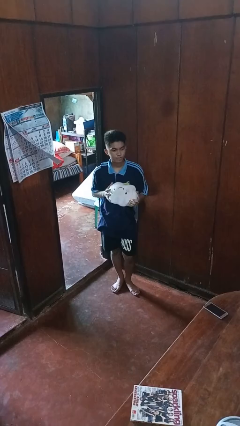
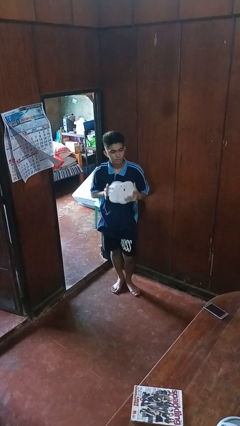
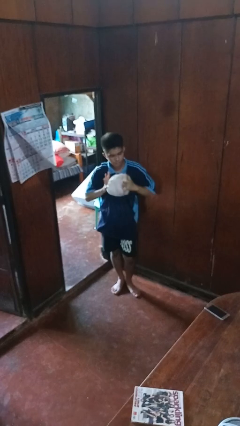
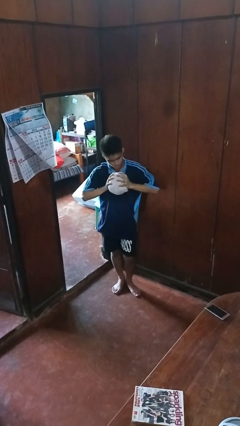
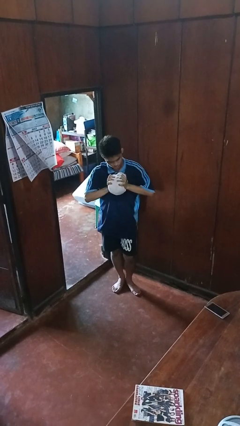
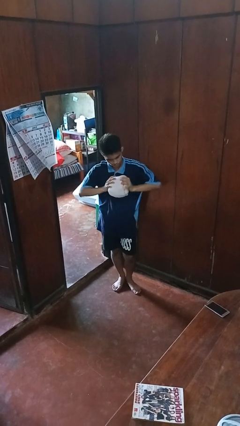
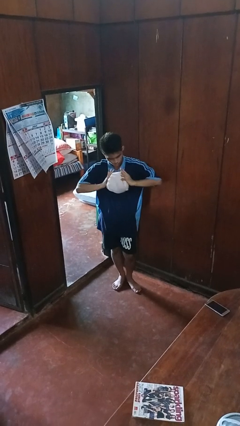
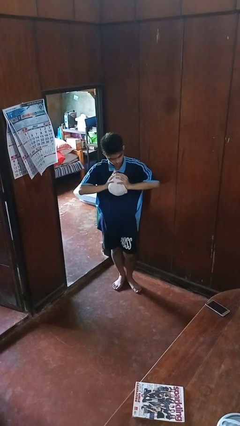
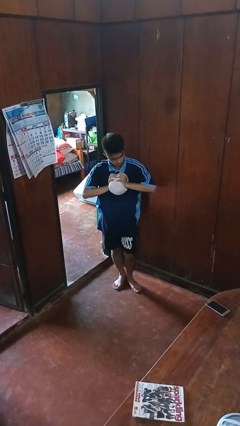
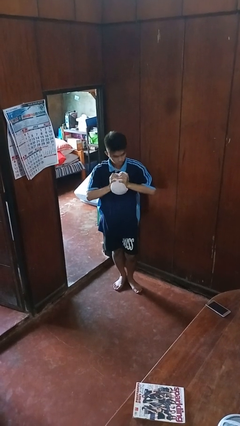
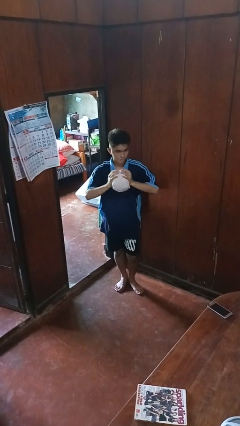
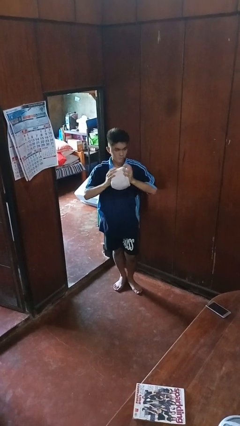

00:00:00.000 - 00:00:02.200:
person squeezes object

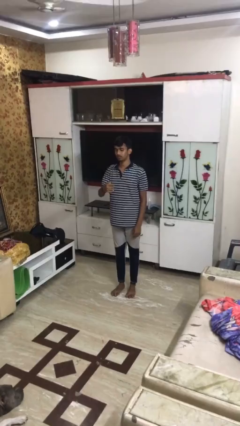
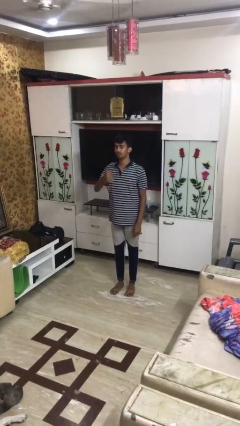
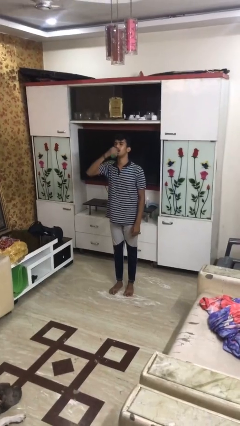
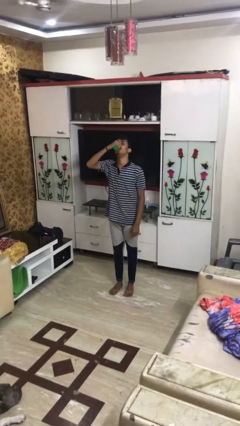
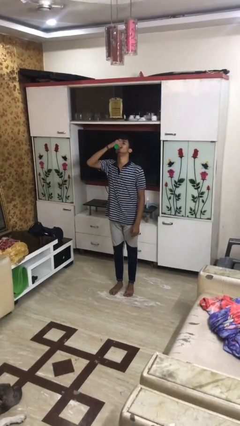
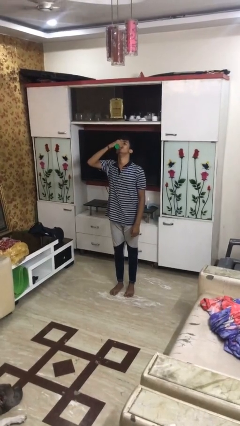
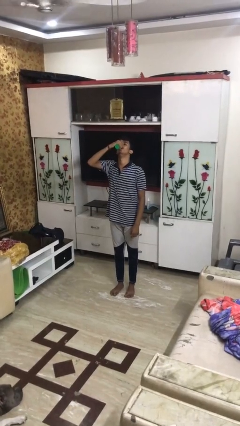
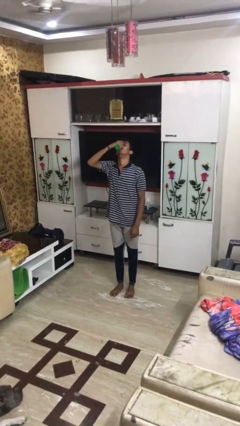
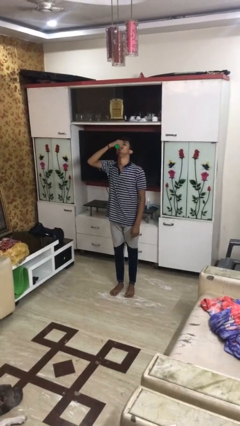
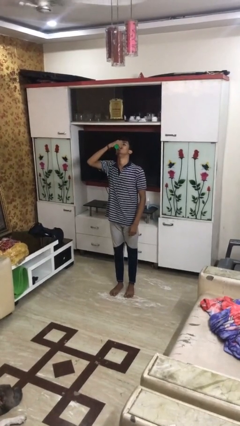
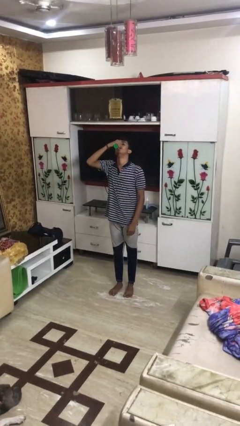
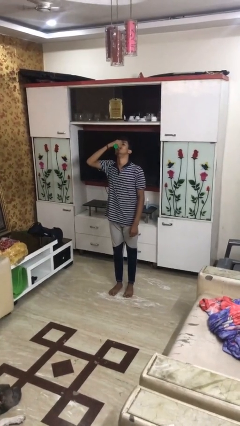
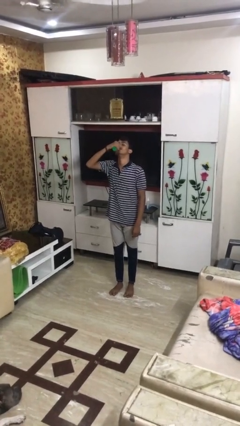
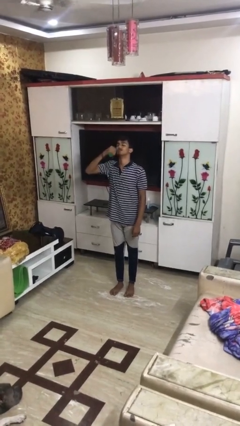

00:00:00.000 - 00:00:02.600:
person drinks from beverage can

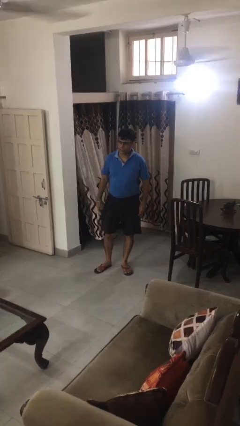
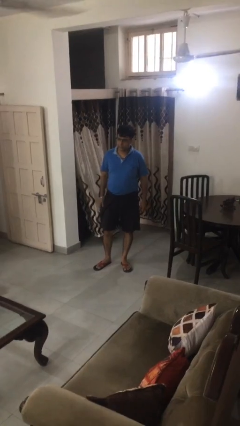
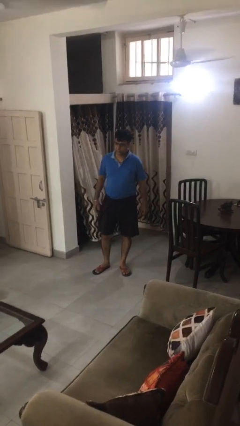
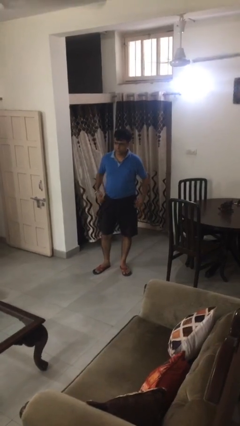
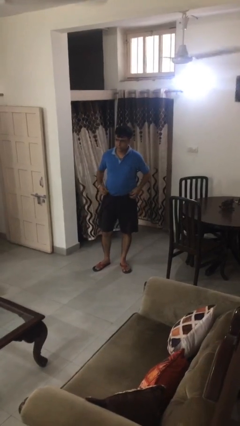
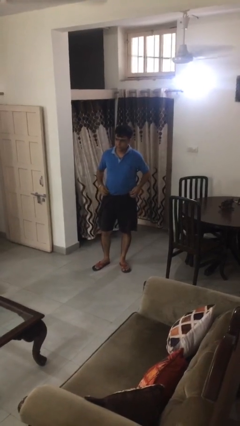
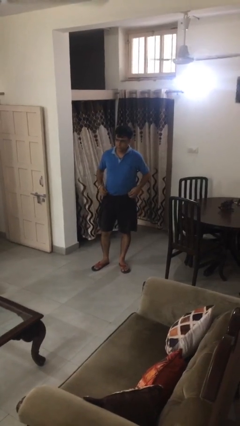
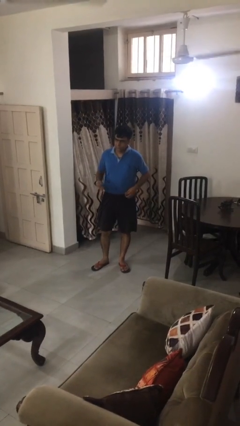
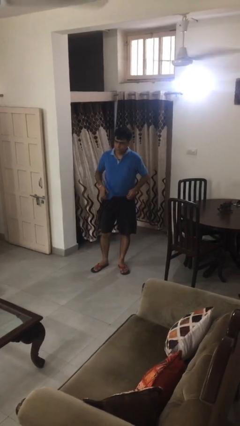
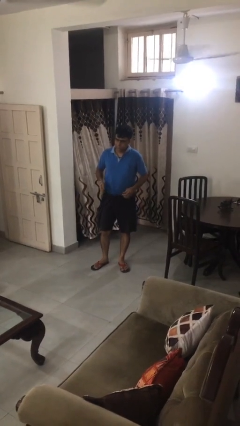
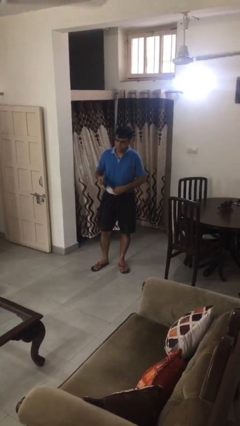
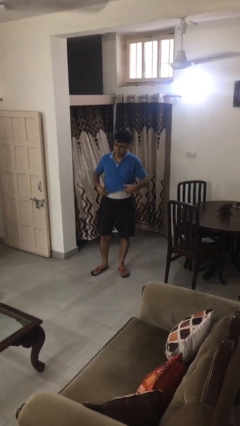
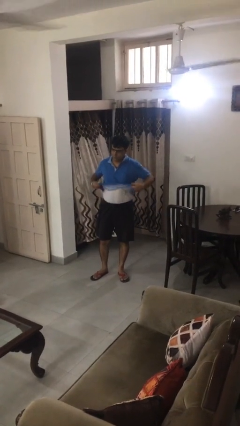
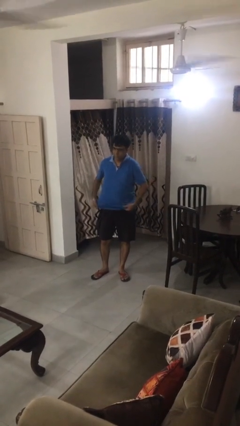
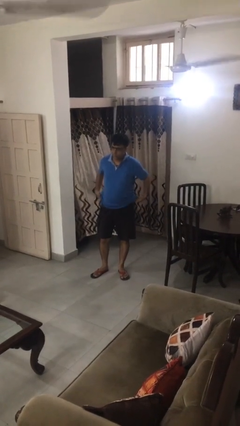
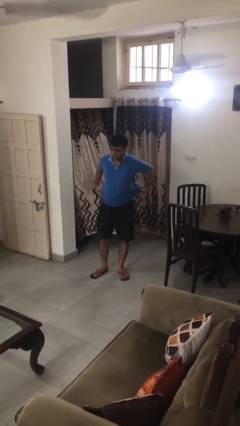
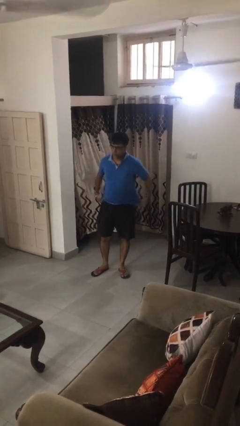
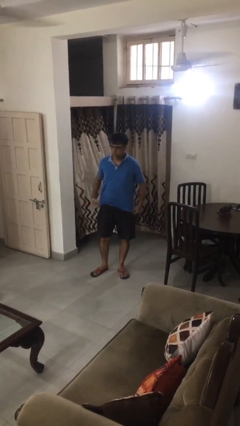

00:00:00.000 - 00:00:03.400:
person untucks shirt

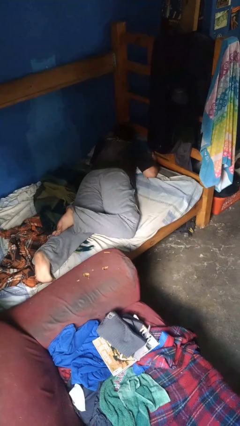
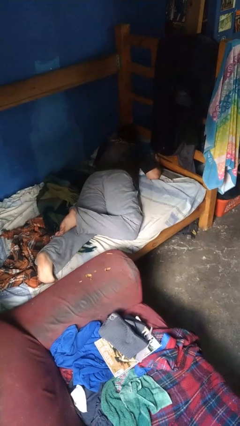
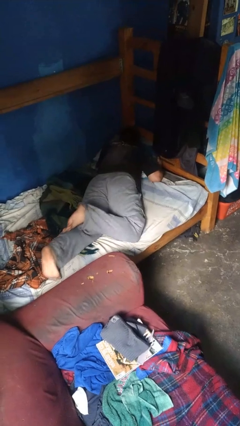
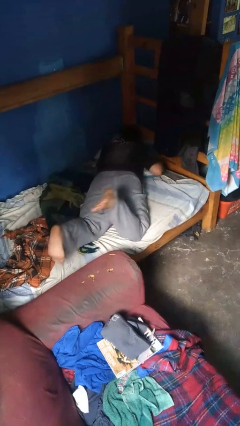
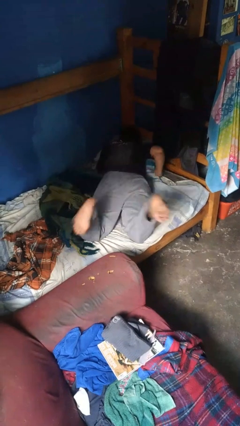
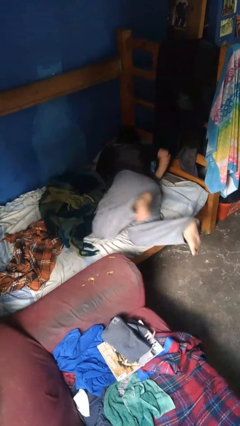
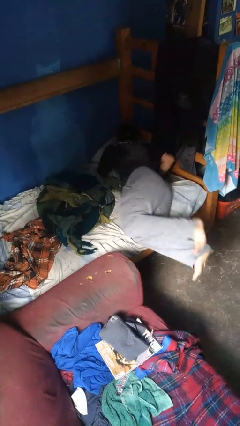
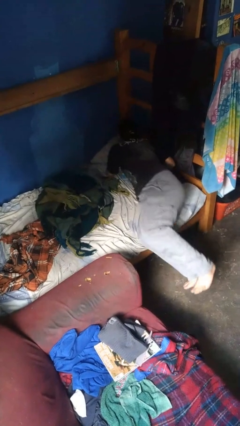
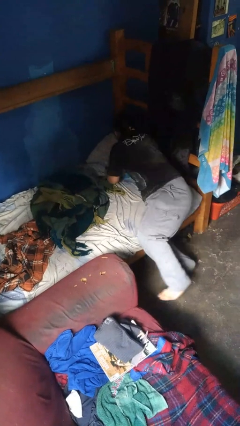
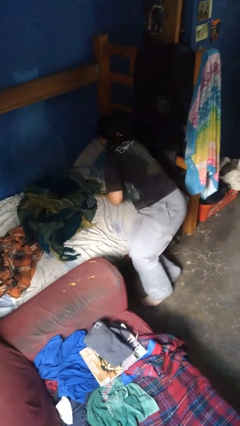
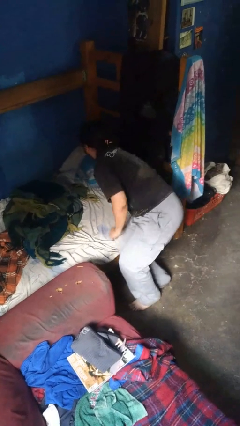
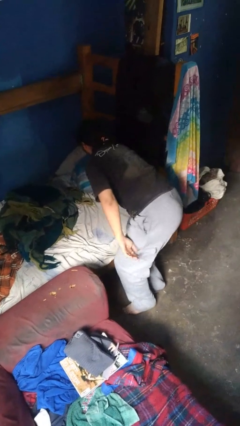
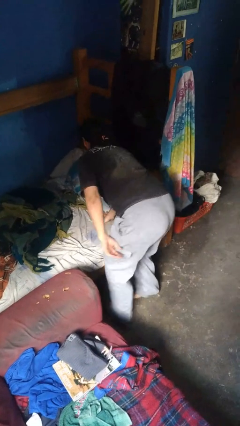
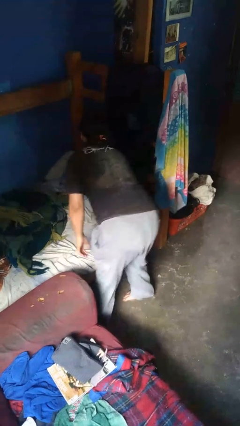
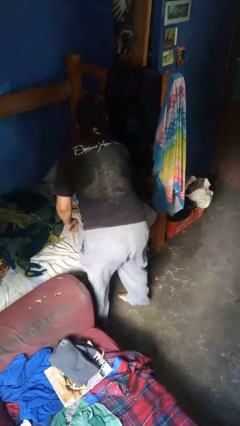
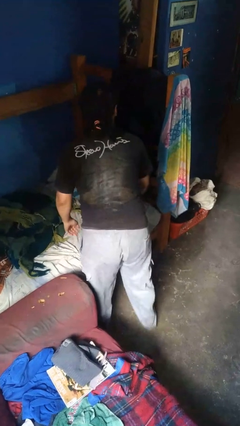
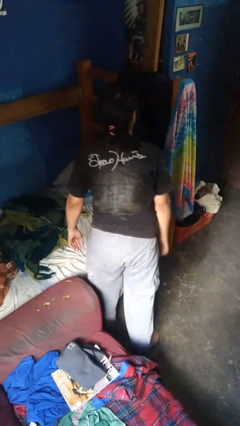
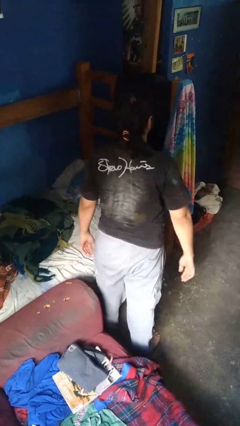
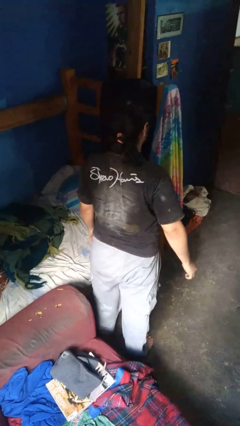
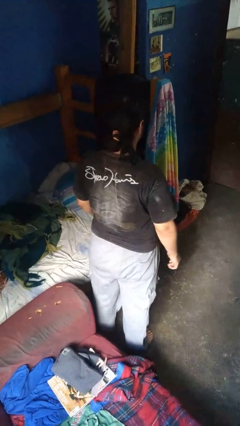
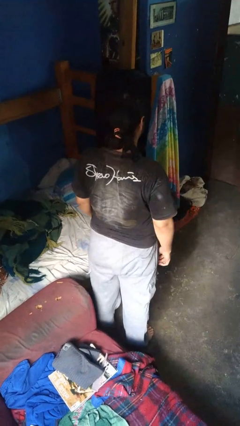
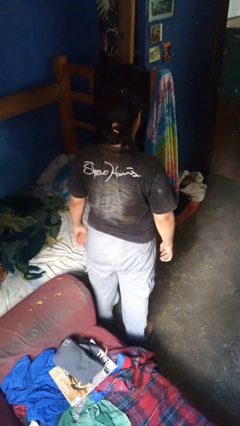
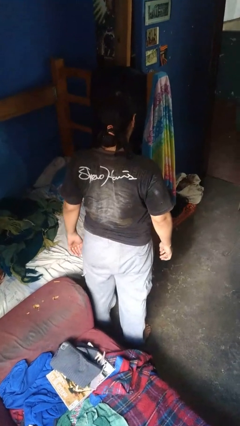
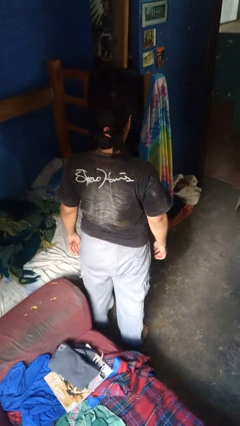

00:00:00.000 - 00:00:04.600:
person stands up

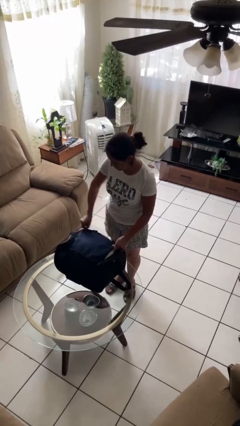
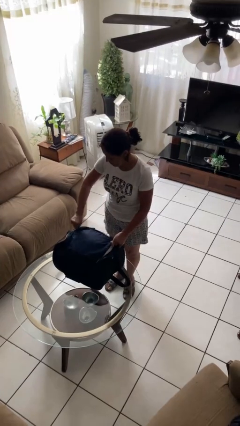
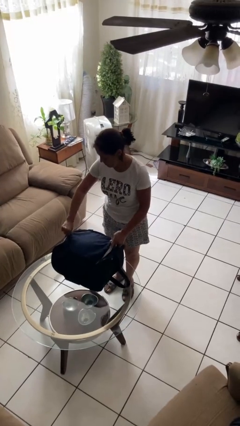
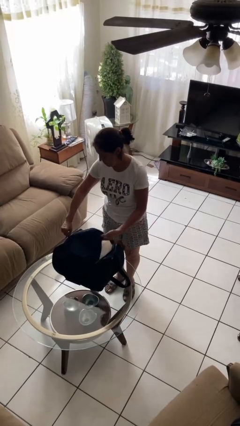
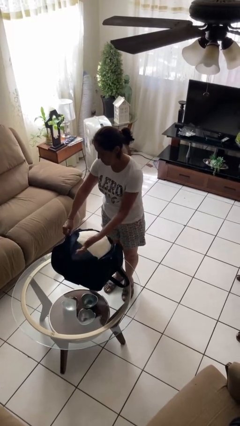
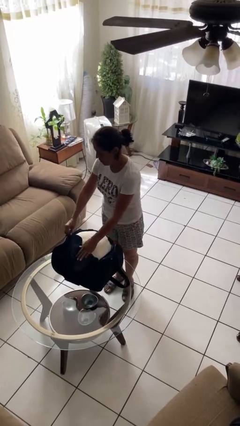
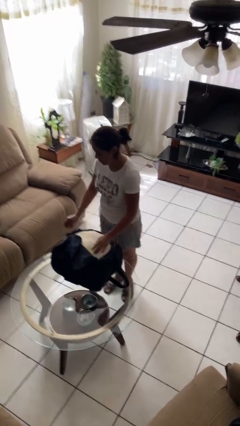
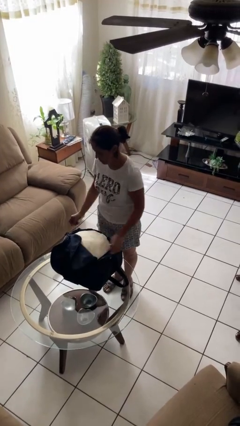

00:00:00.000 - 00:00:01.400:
person opens suitcase

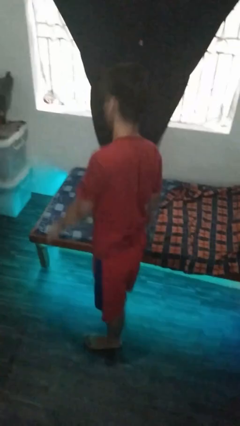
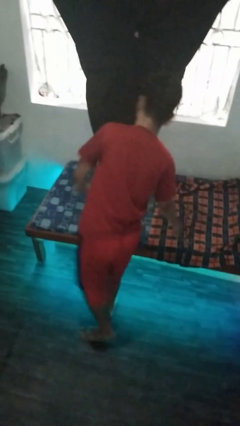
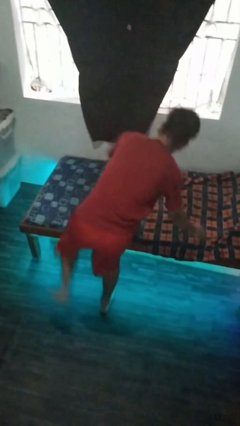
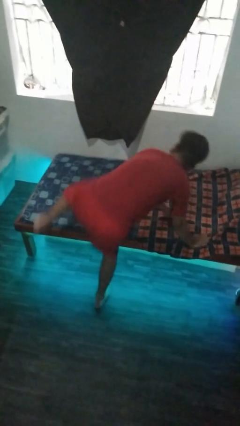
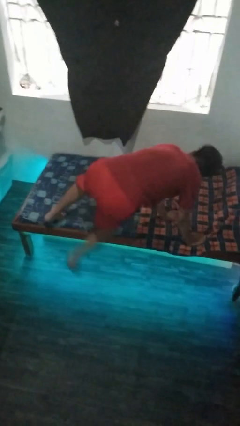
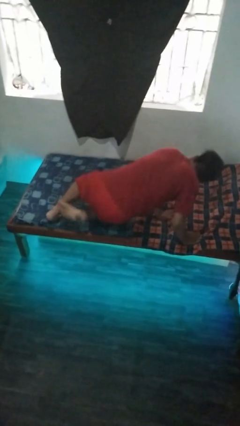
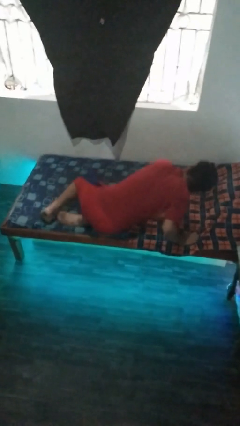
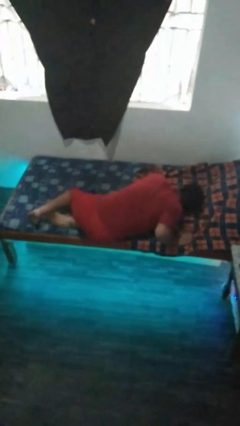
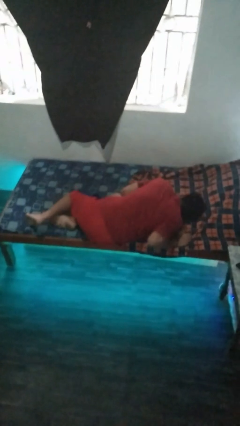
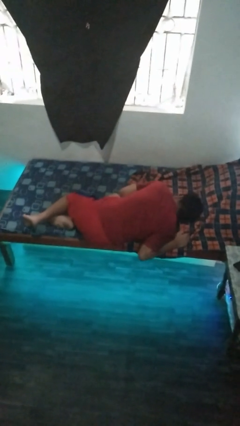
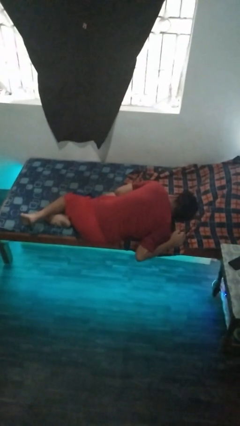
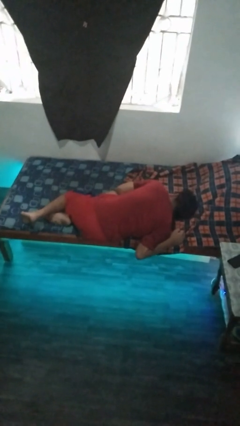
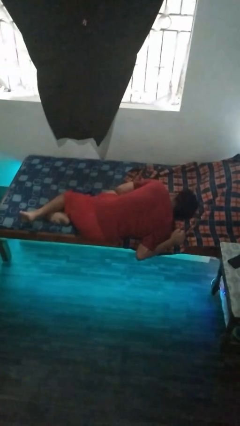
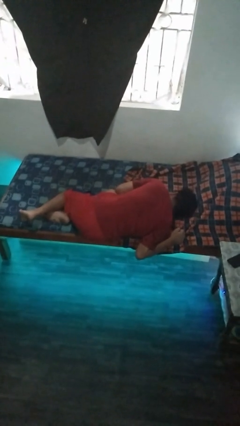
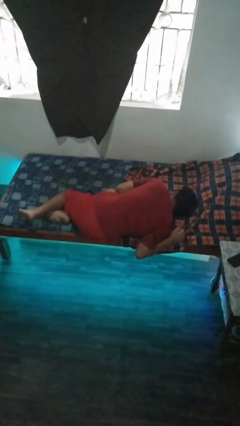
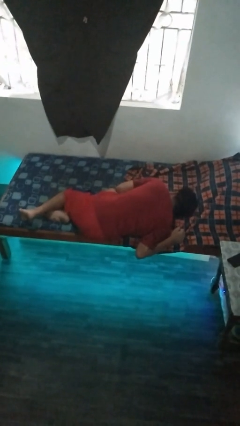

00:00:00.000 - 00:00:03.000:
person lies down on bed
